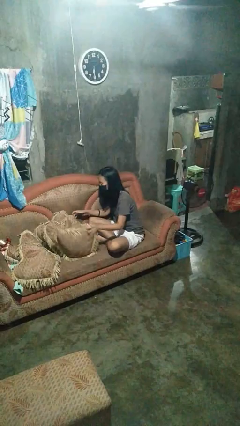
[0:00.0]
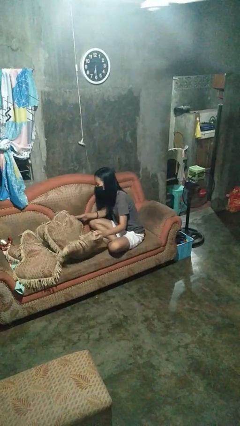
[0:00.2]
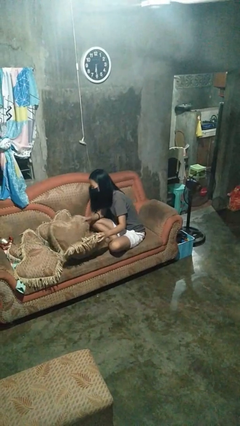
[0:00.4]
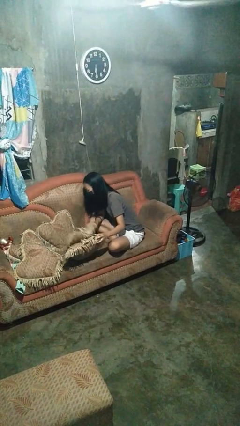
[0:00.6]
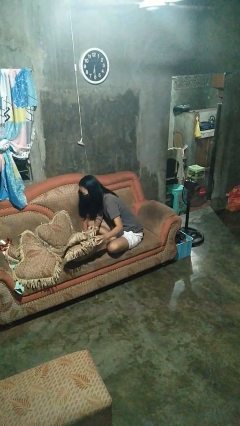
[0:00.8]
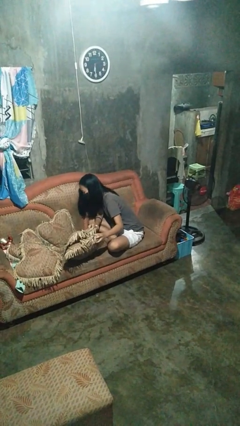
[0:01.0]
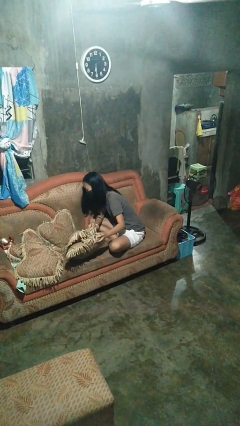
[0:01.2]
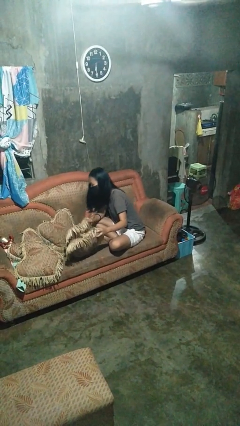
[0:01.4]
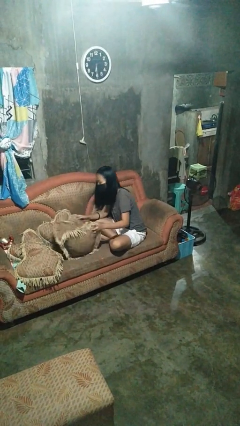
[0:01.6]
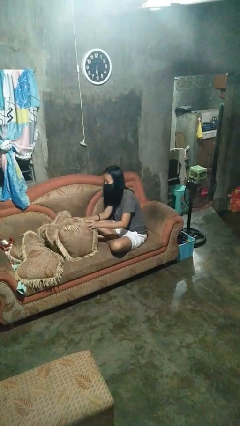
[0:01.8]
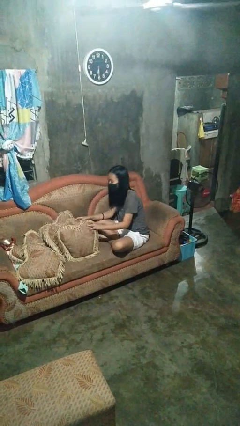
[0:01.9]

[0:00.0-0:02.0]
person searches in couch

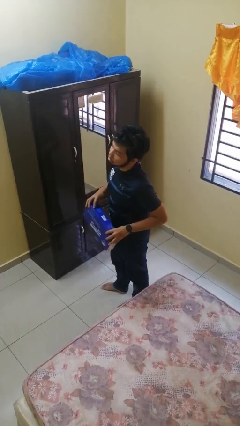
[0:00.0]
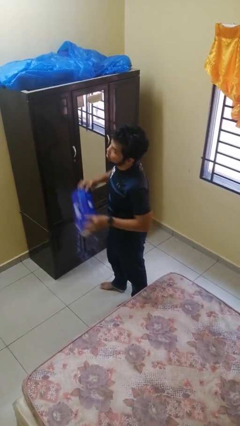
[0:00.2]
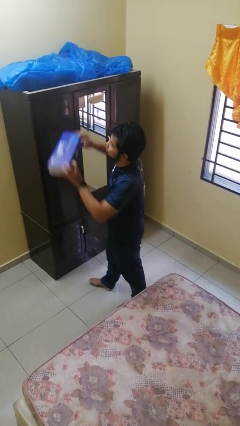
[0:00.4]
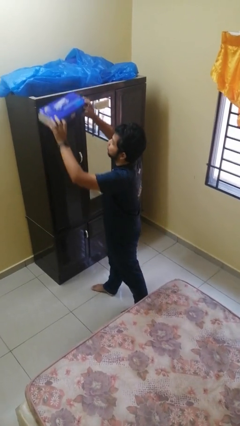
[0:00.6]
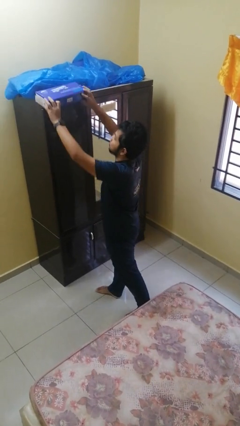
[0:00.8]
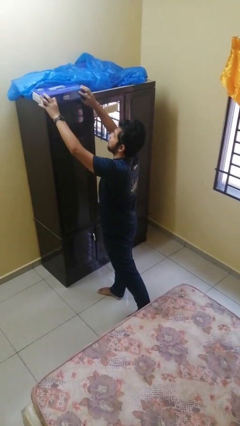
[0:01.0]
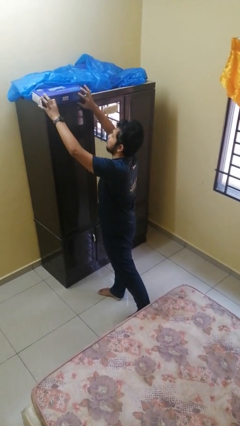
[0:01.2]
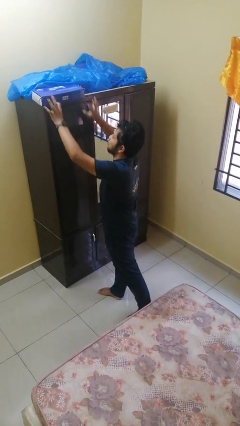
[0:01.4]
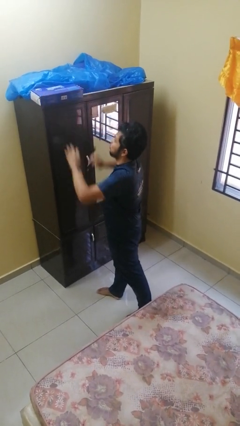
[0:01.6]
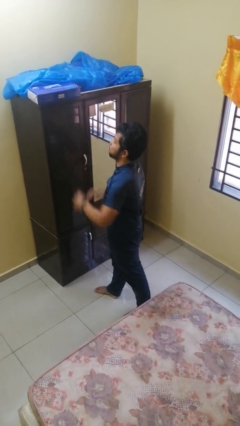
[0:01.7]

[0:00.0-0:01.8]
person puts down object on countertop

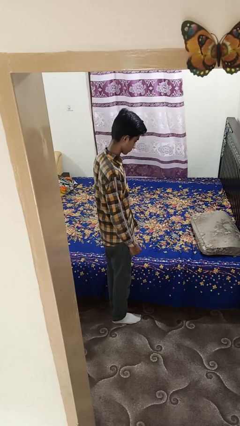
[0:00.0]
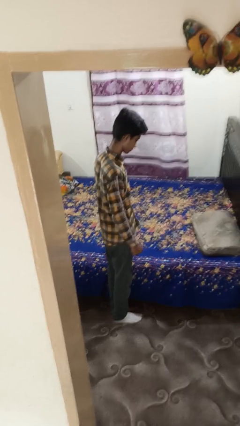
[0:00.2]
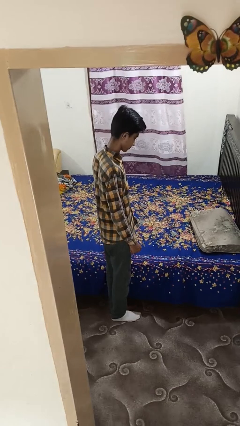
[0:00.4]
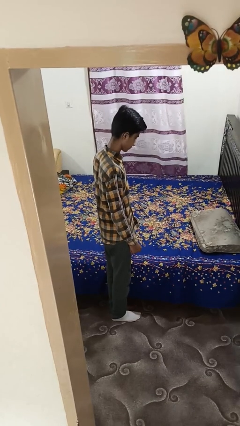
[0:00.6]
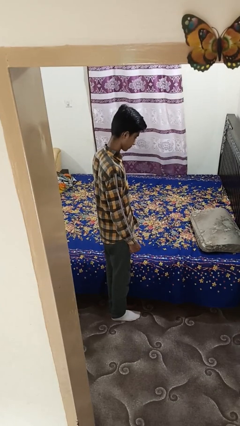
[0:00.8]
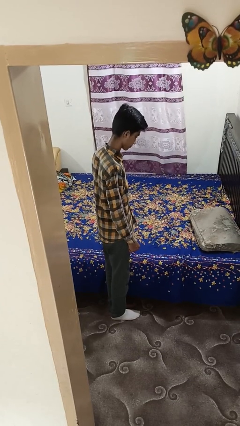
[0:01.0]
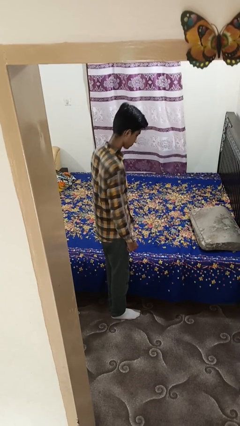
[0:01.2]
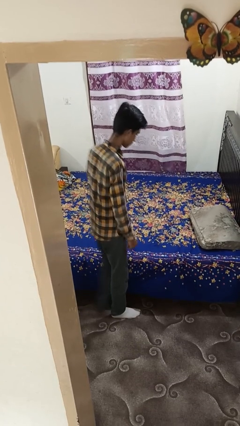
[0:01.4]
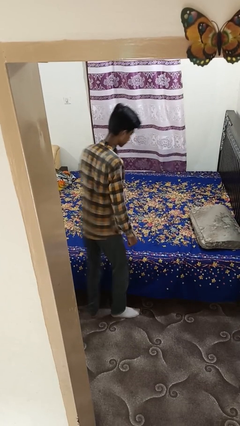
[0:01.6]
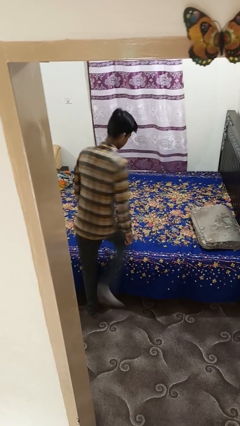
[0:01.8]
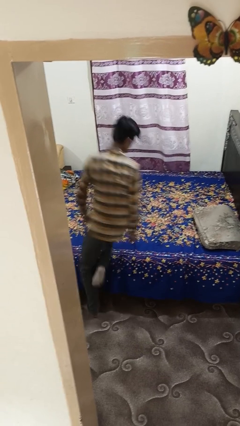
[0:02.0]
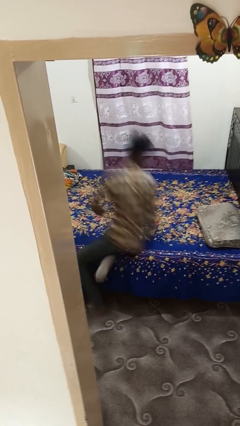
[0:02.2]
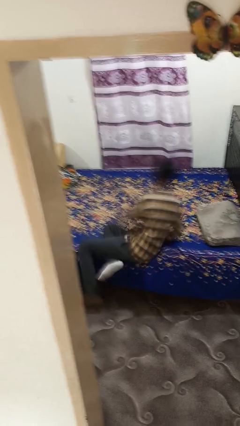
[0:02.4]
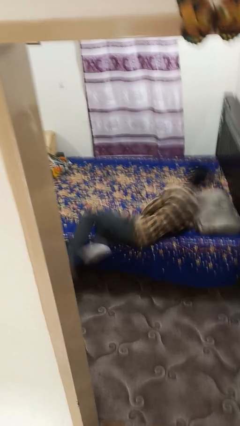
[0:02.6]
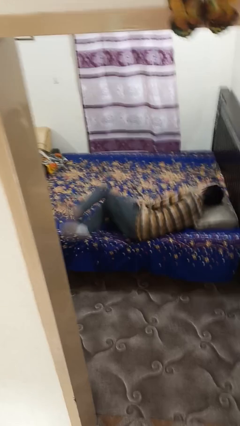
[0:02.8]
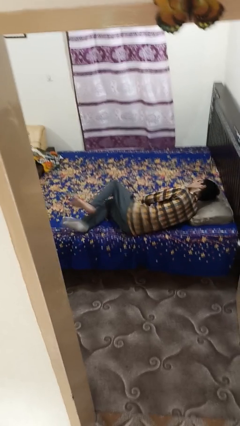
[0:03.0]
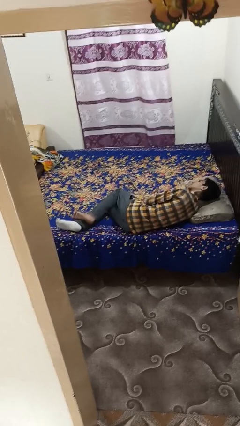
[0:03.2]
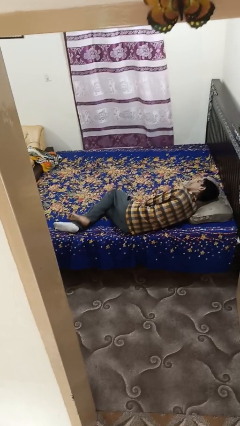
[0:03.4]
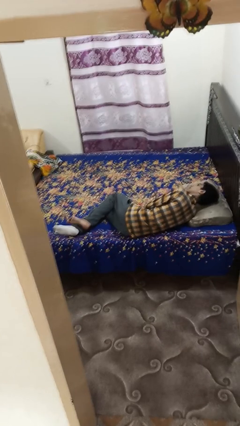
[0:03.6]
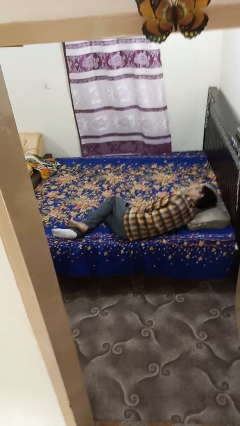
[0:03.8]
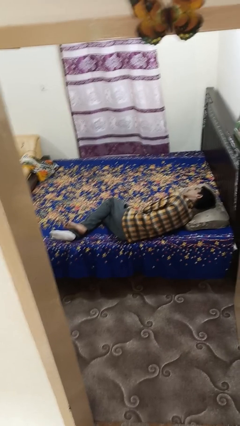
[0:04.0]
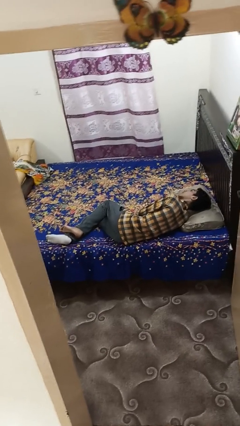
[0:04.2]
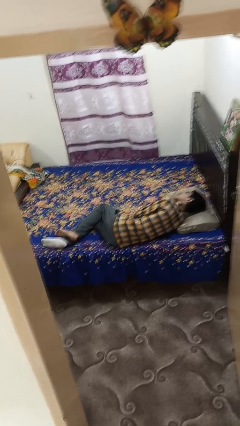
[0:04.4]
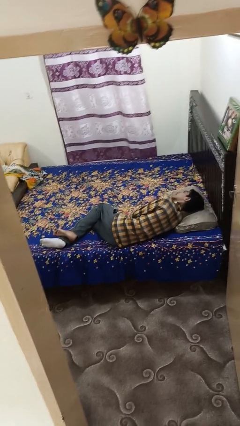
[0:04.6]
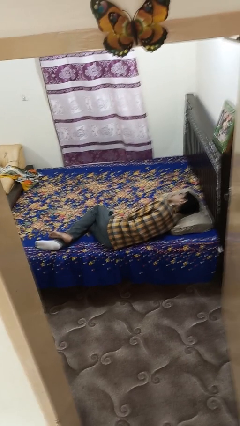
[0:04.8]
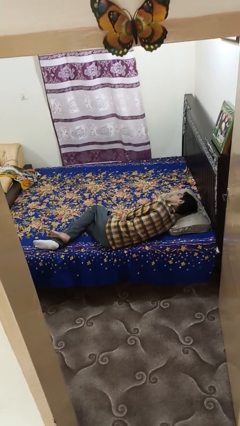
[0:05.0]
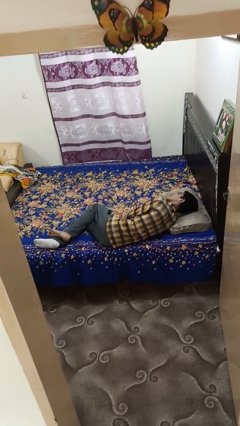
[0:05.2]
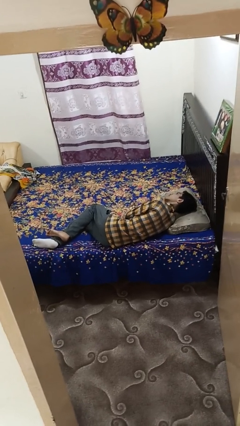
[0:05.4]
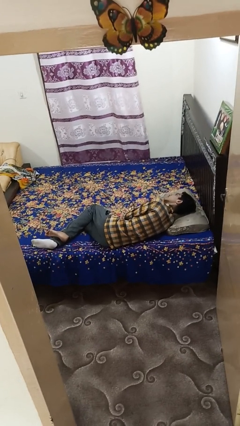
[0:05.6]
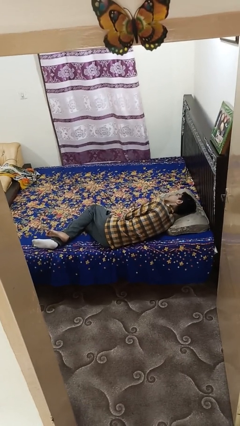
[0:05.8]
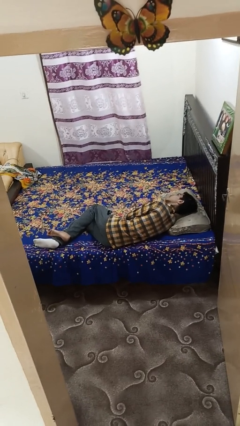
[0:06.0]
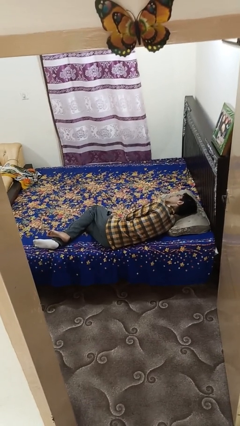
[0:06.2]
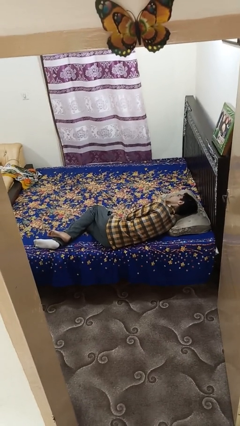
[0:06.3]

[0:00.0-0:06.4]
person lies down on bed

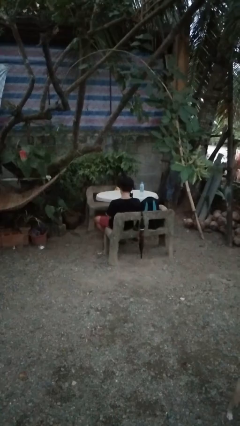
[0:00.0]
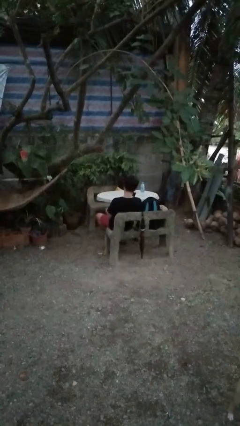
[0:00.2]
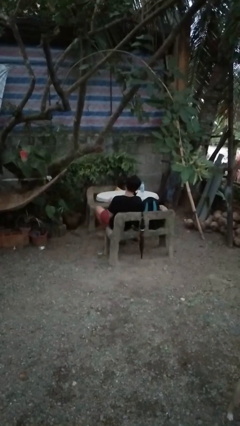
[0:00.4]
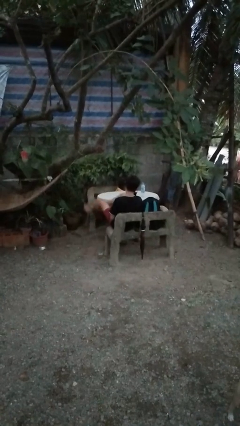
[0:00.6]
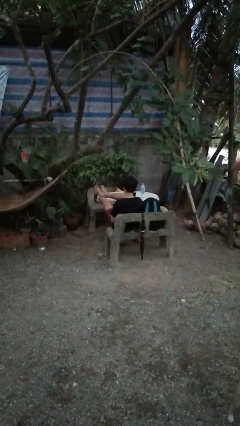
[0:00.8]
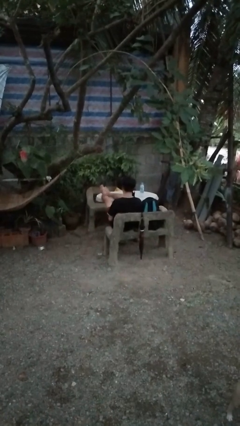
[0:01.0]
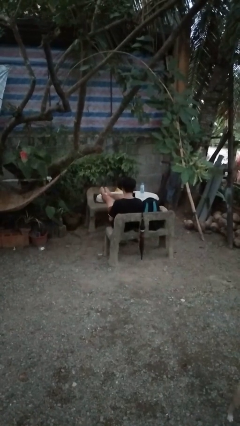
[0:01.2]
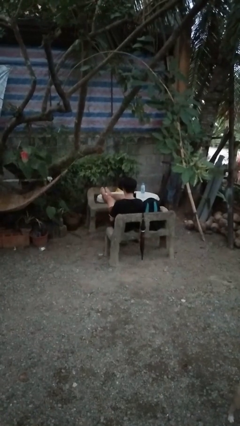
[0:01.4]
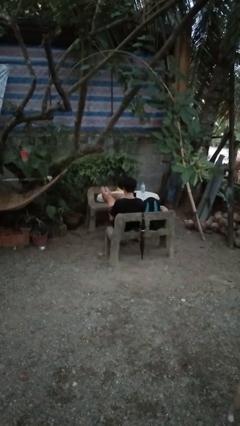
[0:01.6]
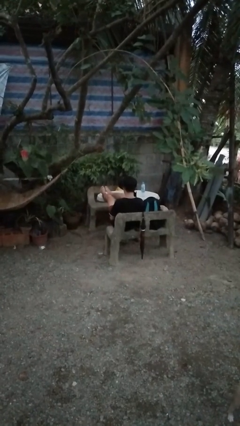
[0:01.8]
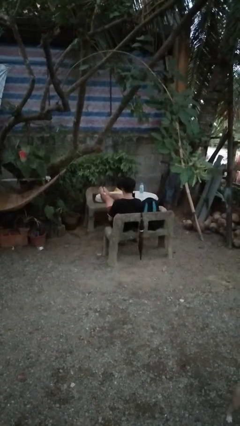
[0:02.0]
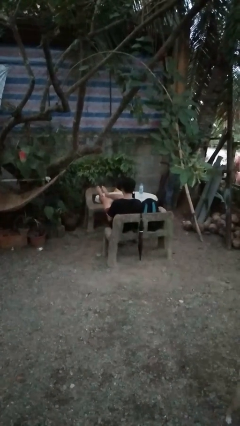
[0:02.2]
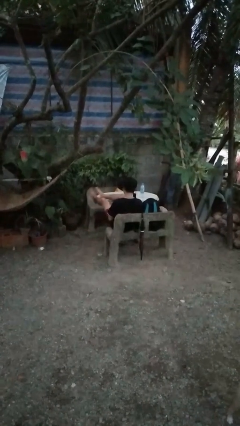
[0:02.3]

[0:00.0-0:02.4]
person puts feet up

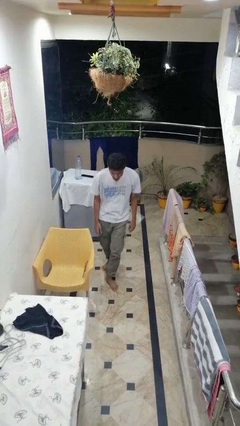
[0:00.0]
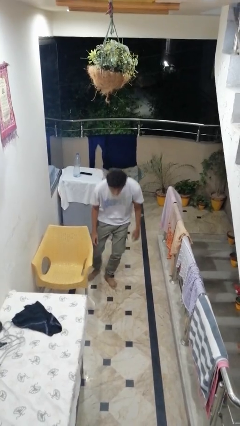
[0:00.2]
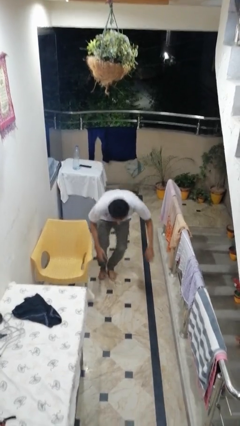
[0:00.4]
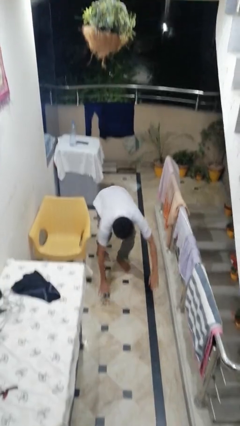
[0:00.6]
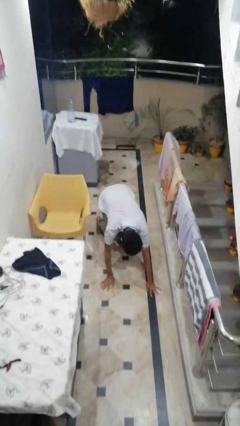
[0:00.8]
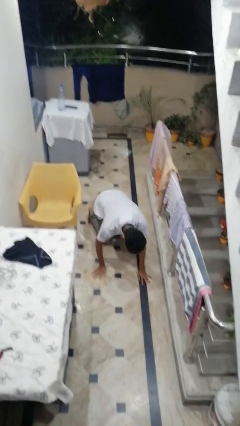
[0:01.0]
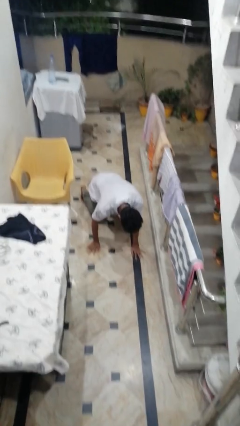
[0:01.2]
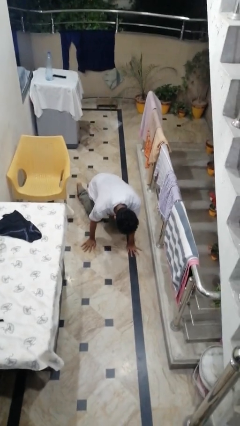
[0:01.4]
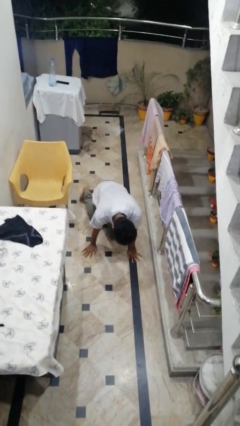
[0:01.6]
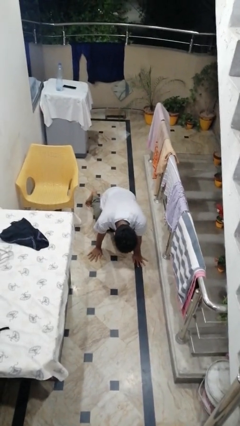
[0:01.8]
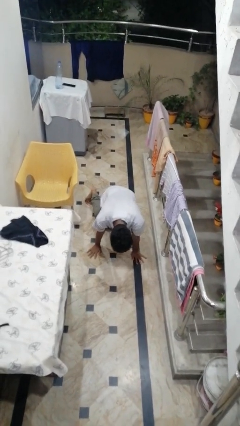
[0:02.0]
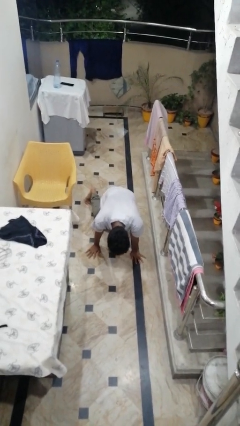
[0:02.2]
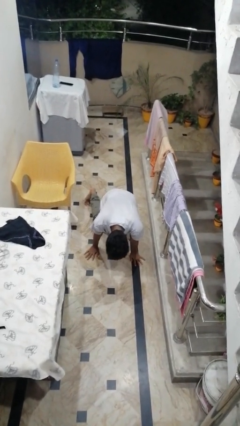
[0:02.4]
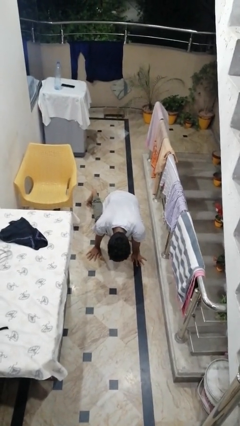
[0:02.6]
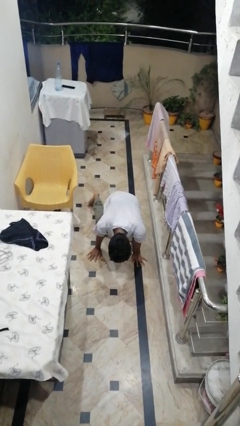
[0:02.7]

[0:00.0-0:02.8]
person trips on object on floor

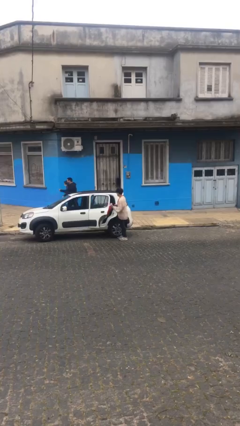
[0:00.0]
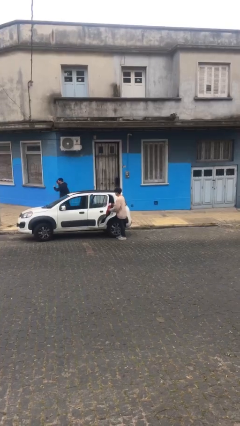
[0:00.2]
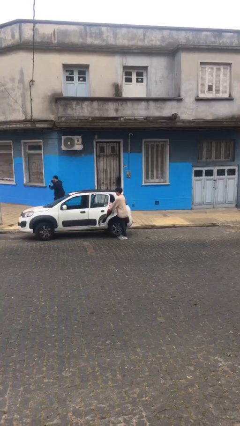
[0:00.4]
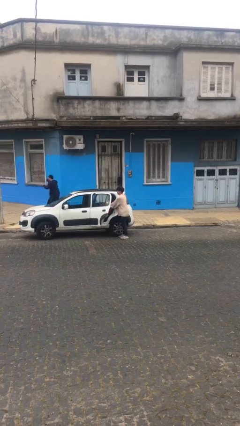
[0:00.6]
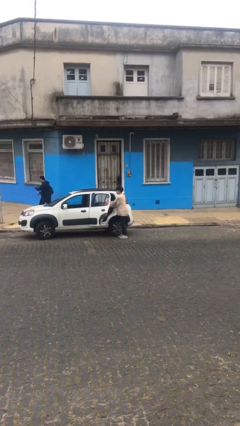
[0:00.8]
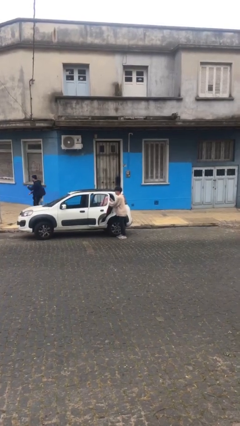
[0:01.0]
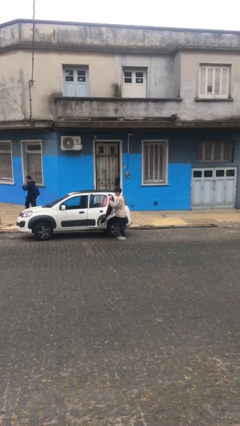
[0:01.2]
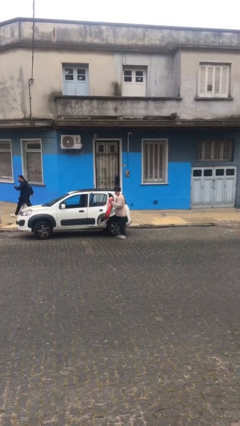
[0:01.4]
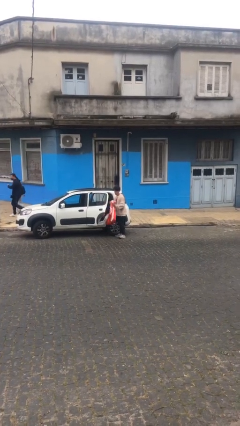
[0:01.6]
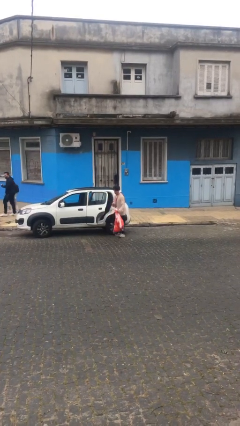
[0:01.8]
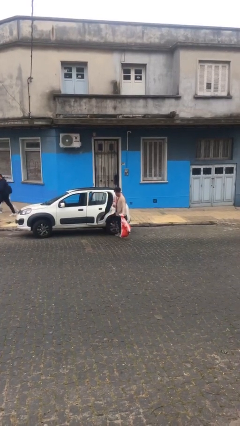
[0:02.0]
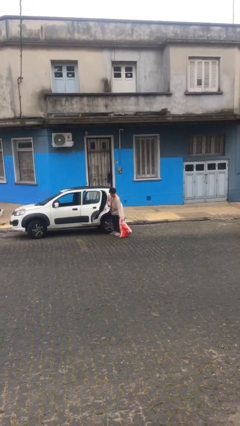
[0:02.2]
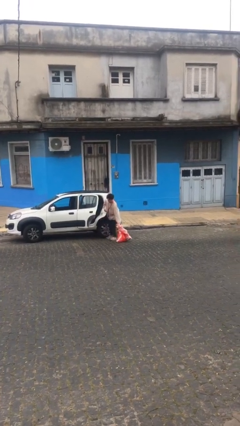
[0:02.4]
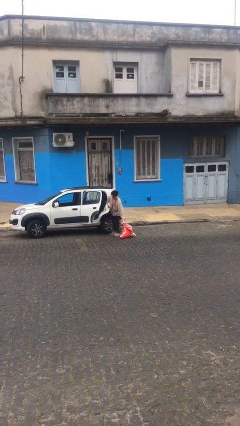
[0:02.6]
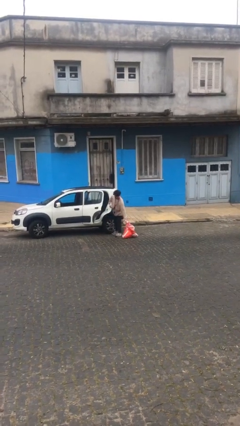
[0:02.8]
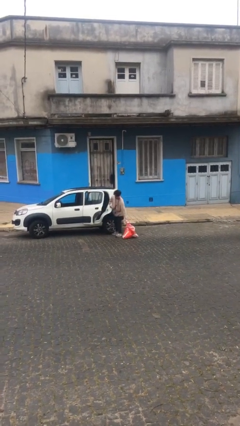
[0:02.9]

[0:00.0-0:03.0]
person unloads car
